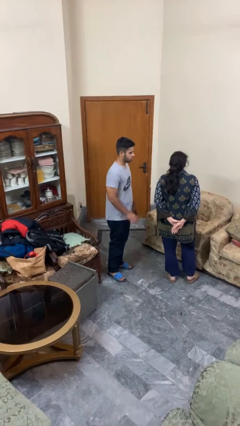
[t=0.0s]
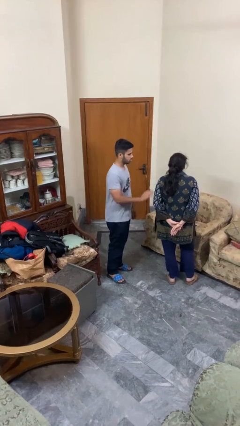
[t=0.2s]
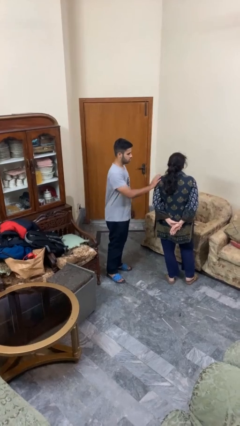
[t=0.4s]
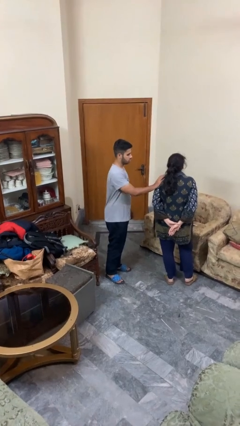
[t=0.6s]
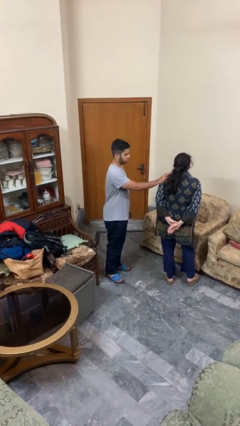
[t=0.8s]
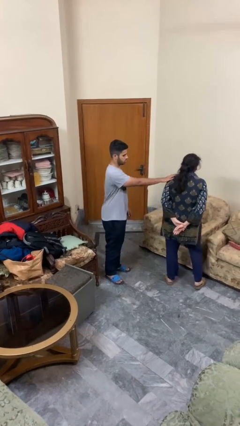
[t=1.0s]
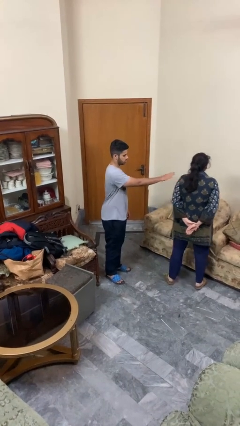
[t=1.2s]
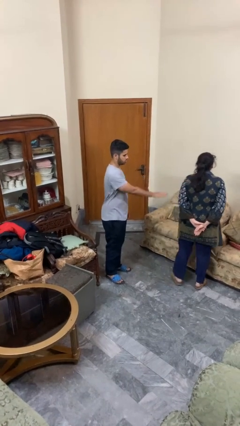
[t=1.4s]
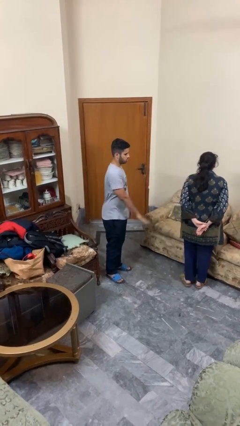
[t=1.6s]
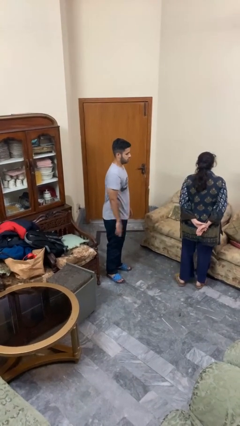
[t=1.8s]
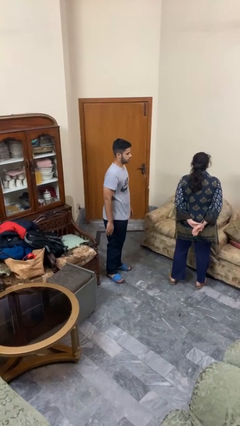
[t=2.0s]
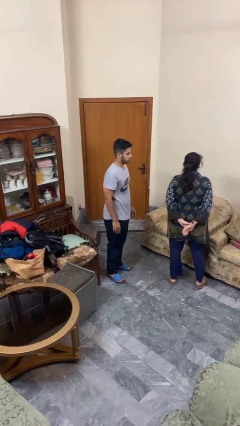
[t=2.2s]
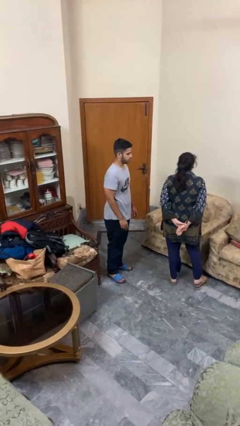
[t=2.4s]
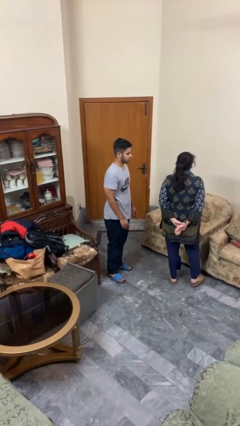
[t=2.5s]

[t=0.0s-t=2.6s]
person shoves person

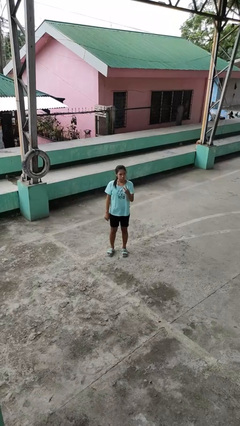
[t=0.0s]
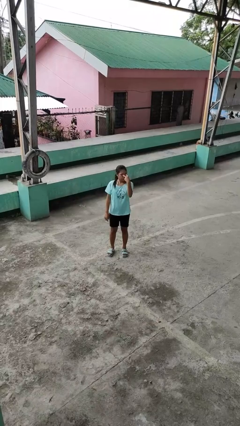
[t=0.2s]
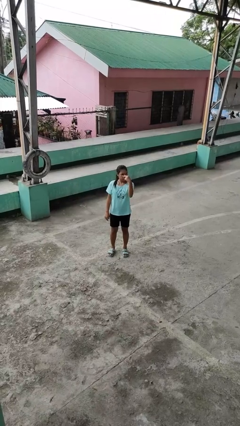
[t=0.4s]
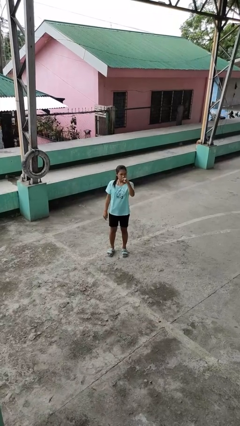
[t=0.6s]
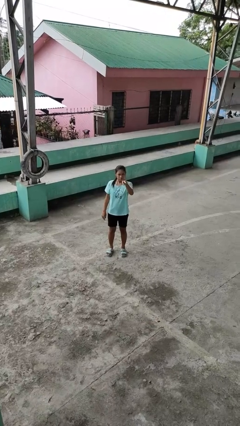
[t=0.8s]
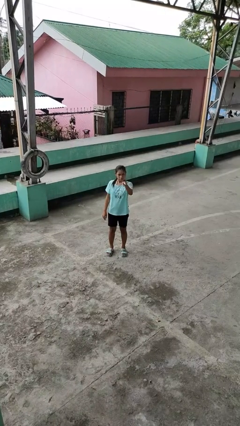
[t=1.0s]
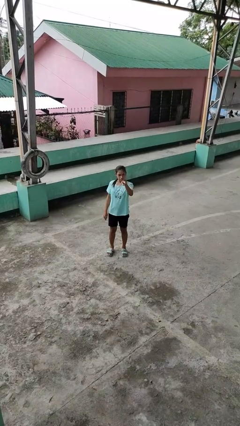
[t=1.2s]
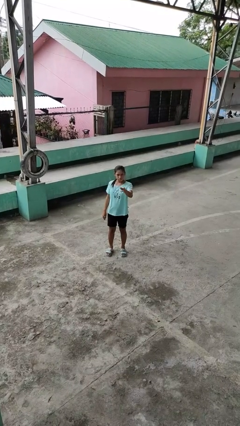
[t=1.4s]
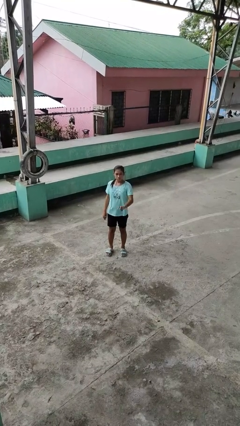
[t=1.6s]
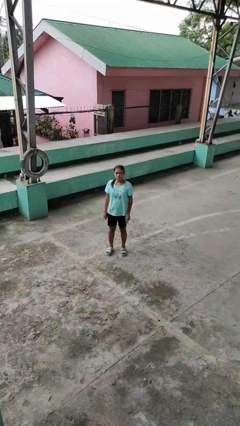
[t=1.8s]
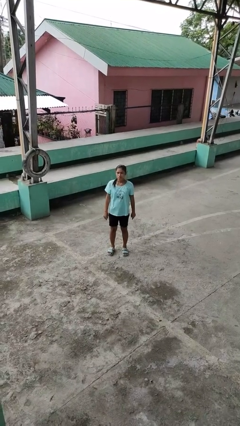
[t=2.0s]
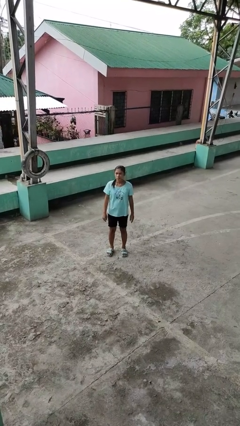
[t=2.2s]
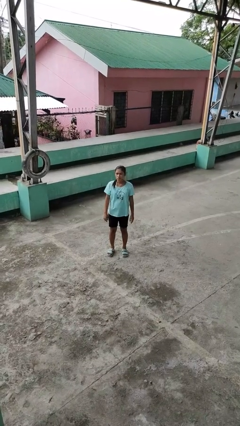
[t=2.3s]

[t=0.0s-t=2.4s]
person gestures watch closely

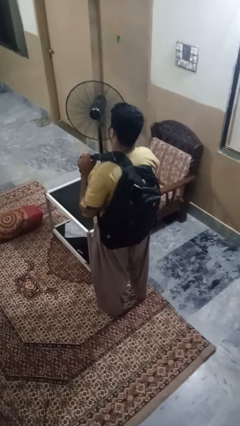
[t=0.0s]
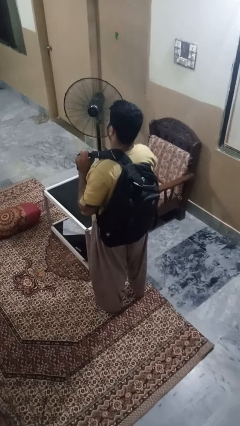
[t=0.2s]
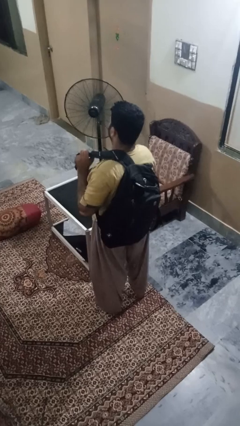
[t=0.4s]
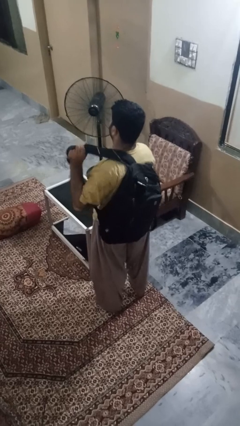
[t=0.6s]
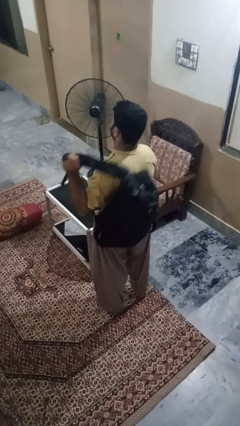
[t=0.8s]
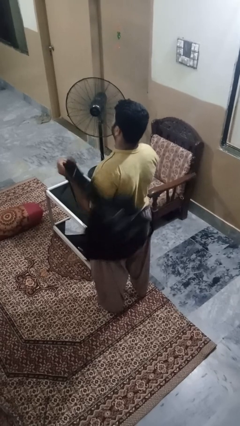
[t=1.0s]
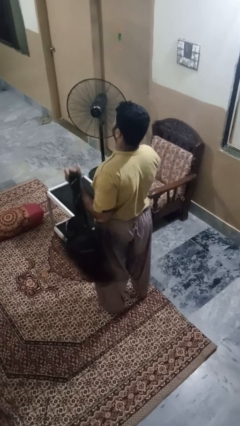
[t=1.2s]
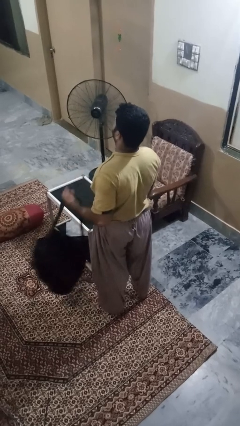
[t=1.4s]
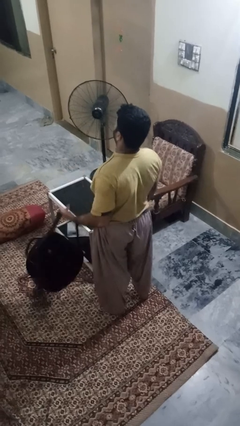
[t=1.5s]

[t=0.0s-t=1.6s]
person takes off backpack

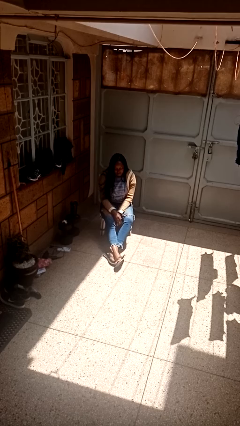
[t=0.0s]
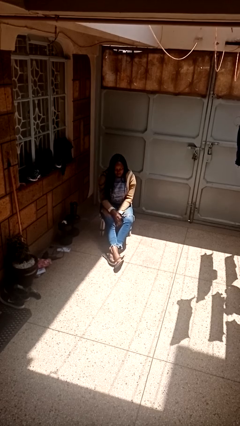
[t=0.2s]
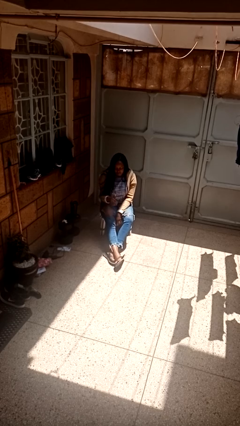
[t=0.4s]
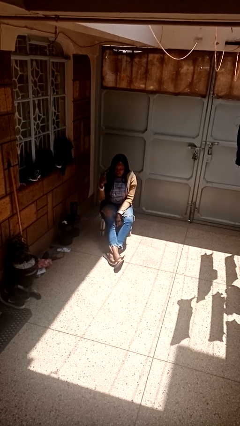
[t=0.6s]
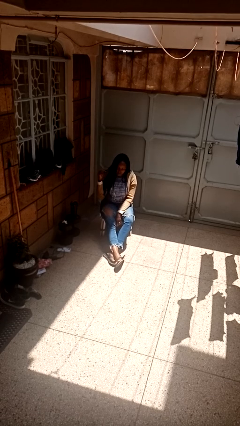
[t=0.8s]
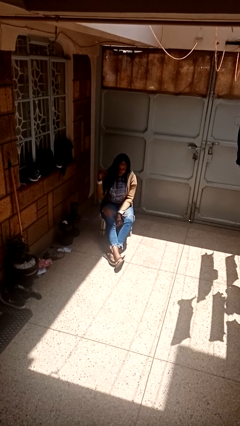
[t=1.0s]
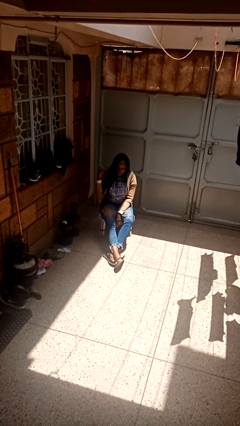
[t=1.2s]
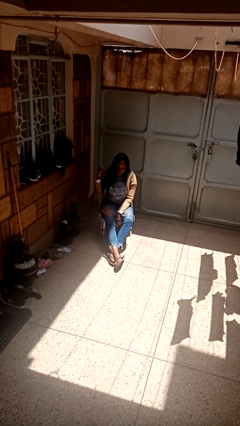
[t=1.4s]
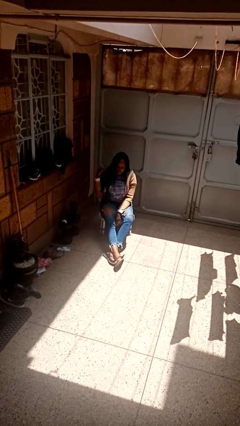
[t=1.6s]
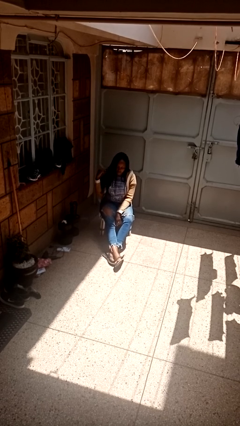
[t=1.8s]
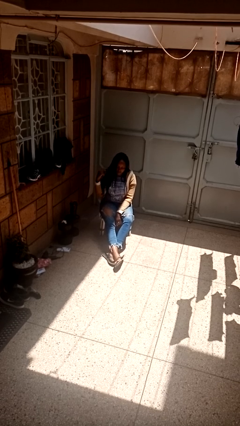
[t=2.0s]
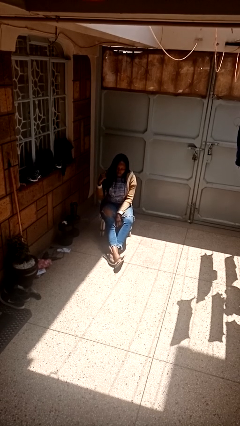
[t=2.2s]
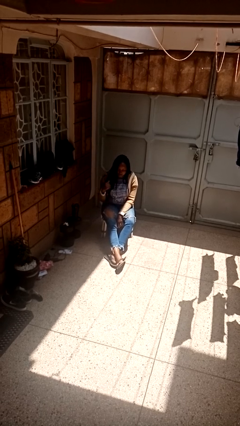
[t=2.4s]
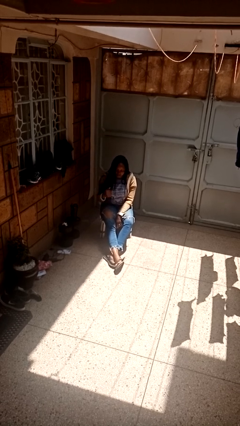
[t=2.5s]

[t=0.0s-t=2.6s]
person gestures behind me

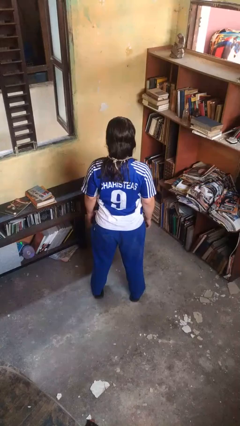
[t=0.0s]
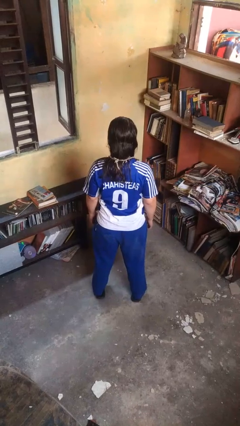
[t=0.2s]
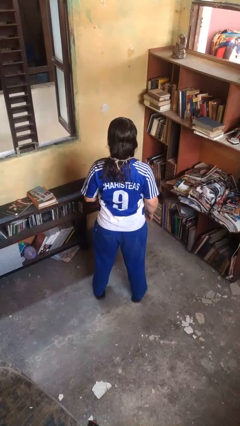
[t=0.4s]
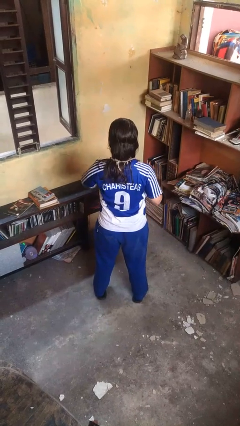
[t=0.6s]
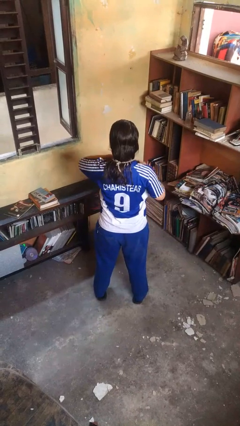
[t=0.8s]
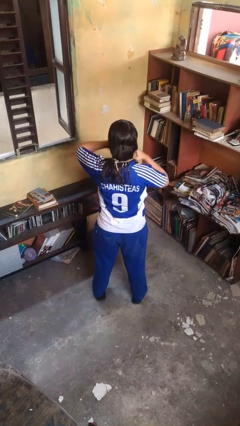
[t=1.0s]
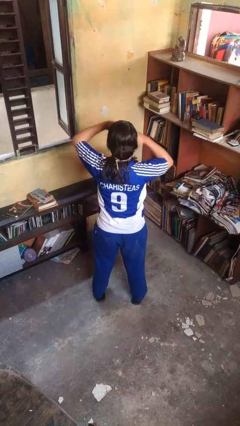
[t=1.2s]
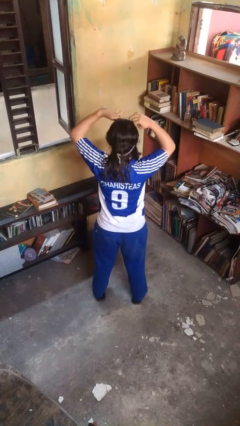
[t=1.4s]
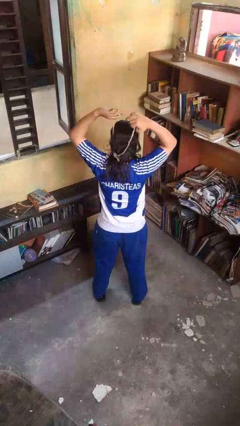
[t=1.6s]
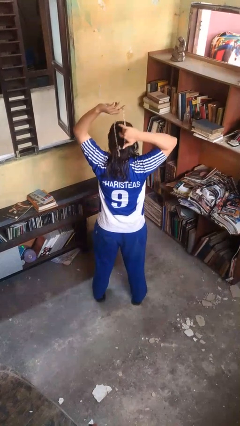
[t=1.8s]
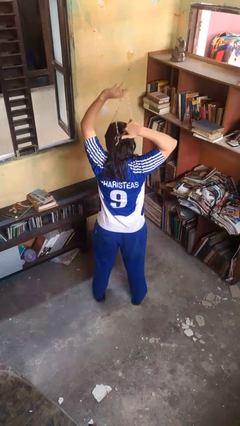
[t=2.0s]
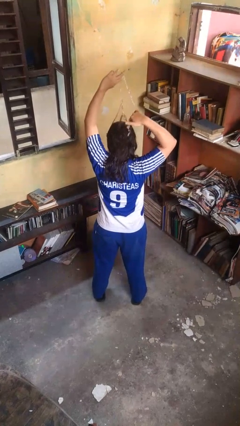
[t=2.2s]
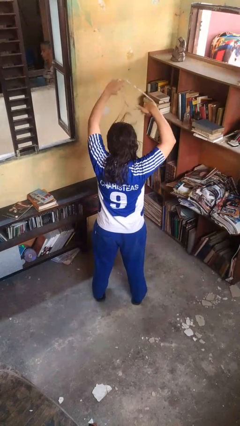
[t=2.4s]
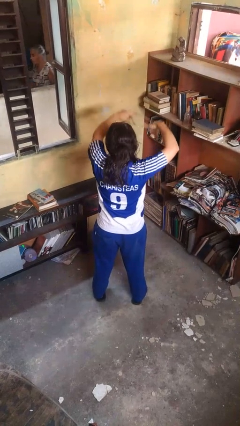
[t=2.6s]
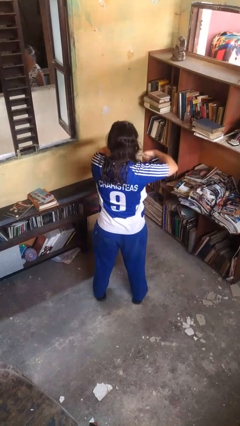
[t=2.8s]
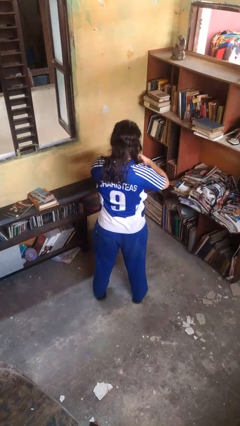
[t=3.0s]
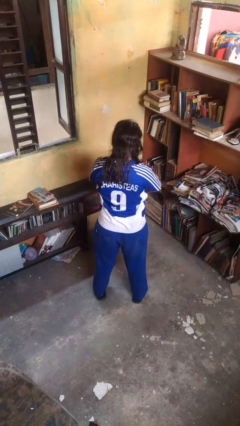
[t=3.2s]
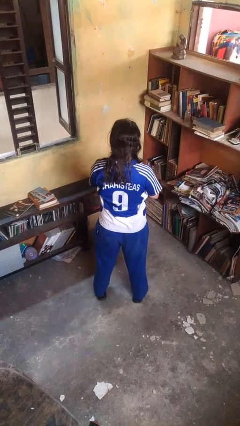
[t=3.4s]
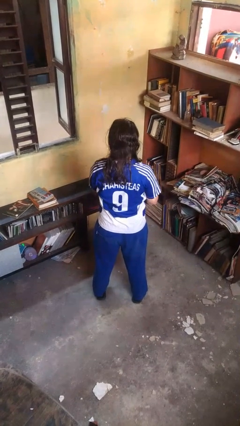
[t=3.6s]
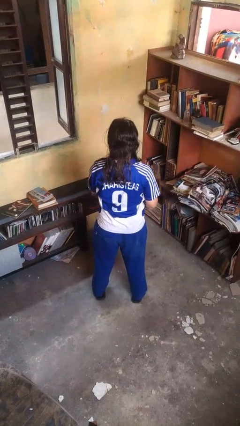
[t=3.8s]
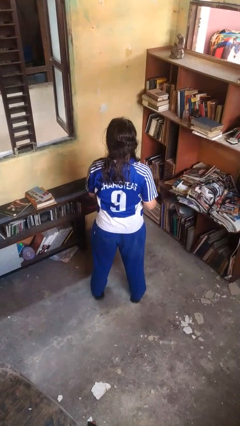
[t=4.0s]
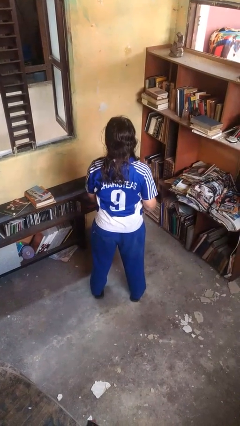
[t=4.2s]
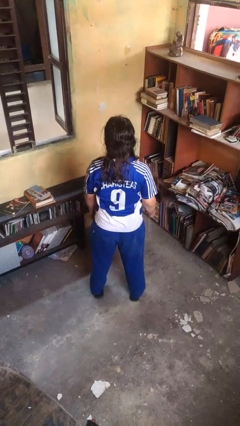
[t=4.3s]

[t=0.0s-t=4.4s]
person takes off necklace

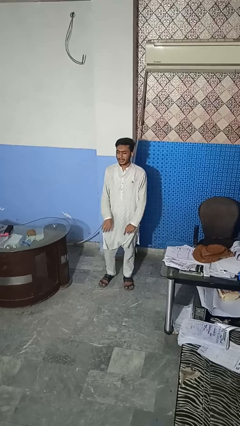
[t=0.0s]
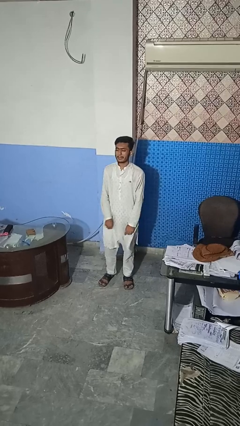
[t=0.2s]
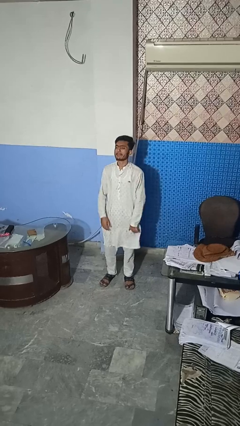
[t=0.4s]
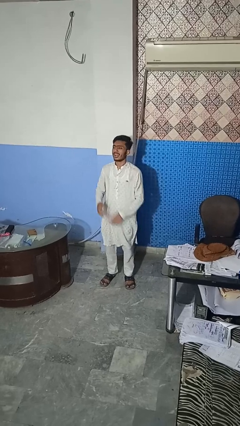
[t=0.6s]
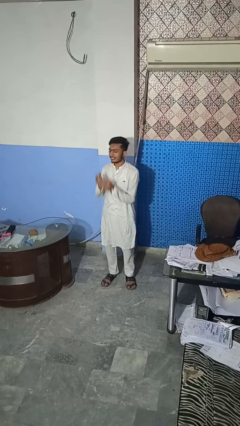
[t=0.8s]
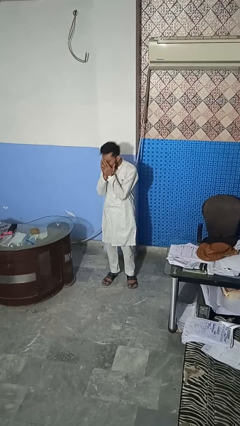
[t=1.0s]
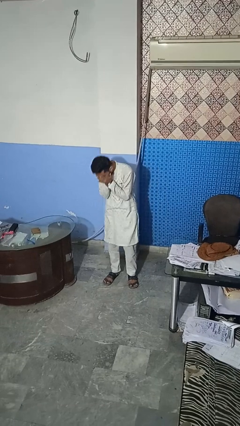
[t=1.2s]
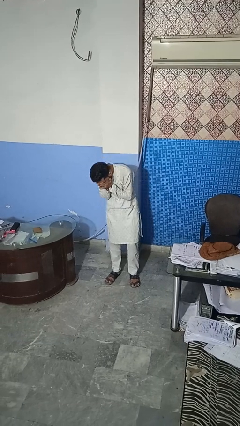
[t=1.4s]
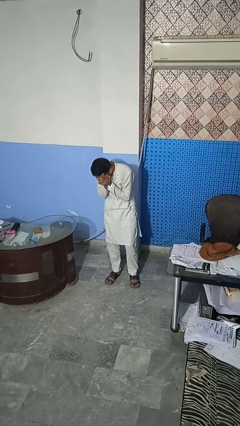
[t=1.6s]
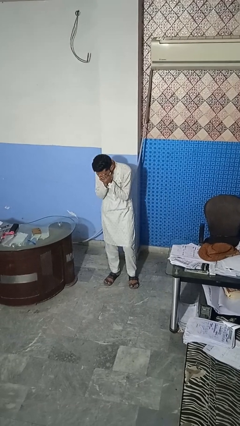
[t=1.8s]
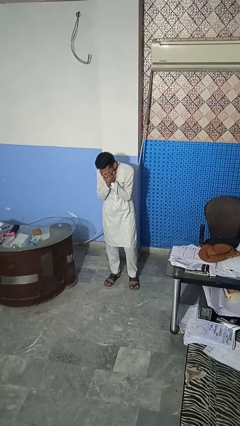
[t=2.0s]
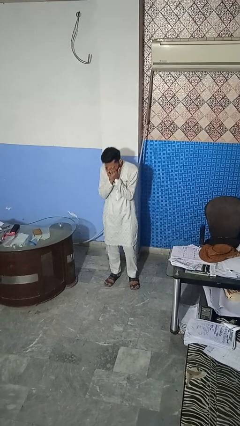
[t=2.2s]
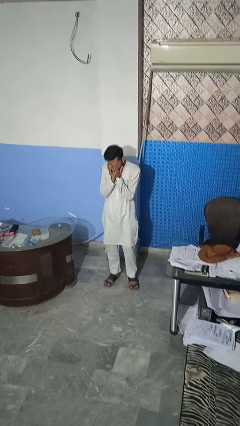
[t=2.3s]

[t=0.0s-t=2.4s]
person sneezes into hand

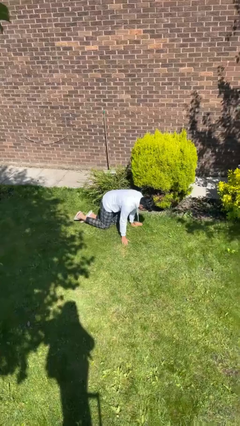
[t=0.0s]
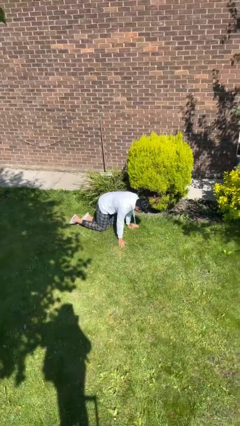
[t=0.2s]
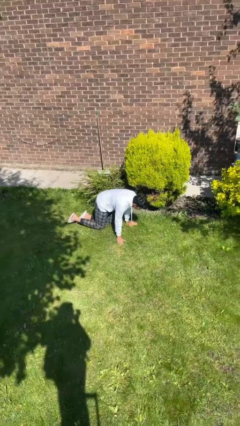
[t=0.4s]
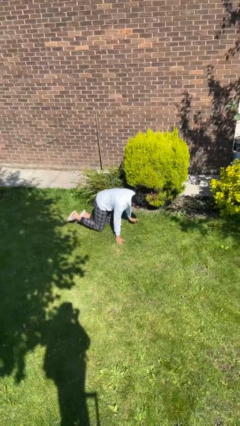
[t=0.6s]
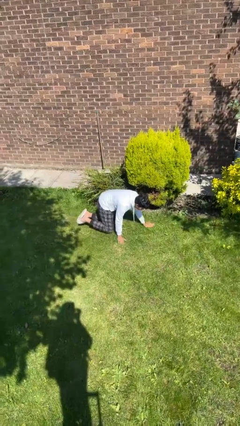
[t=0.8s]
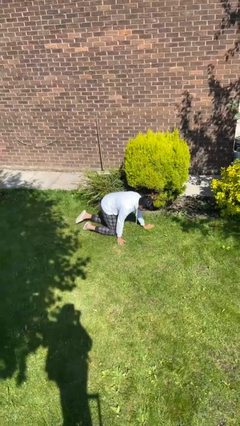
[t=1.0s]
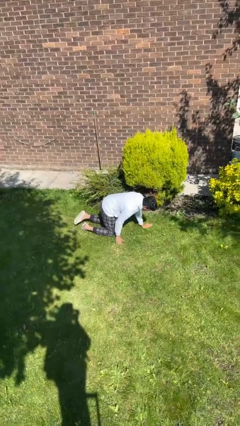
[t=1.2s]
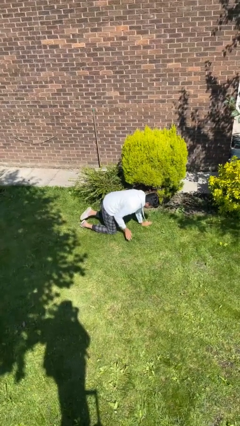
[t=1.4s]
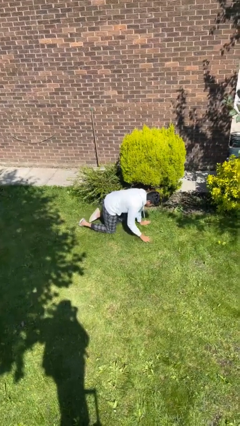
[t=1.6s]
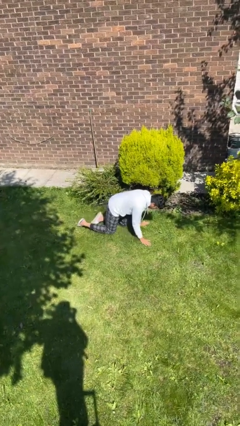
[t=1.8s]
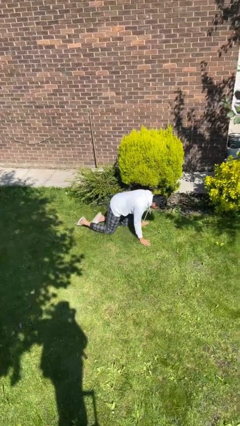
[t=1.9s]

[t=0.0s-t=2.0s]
person crawls
